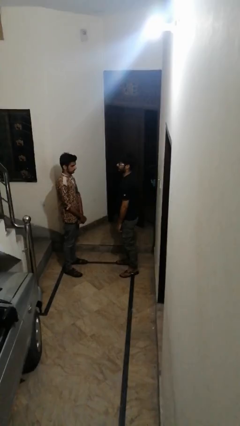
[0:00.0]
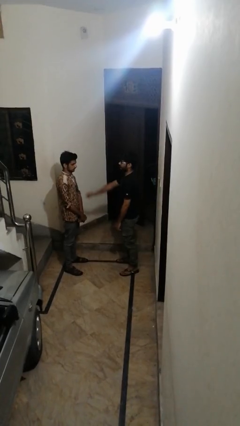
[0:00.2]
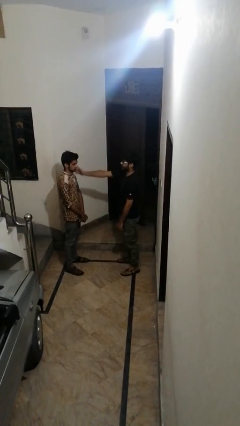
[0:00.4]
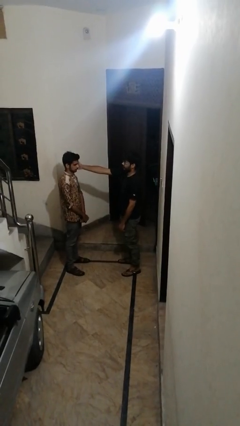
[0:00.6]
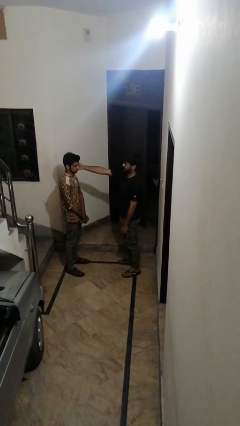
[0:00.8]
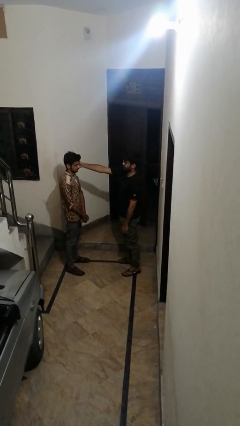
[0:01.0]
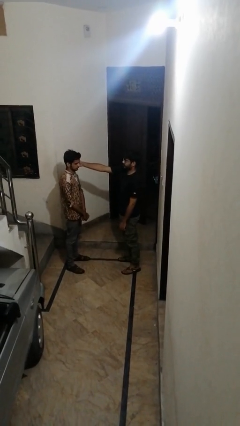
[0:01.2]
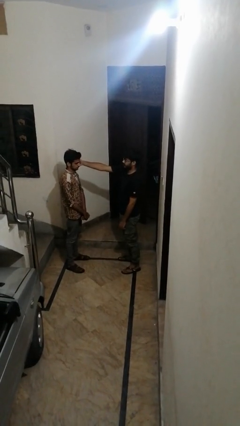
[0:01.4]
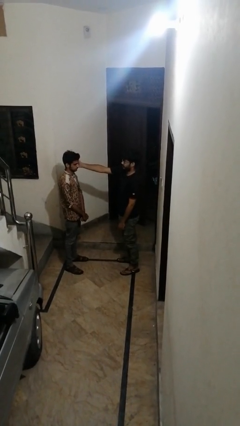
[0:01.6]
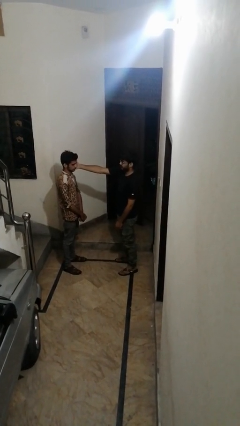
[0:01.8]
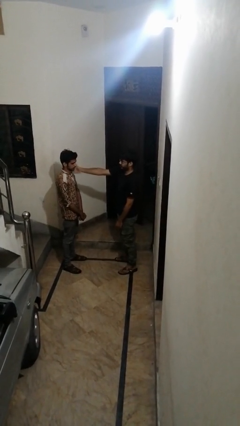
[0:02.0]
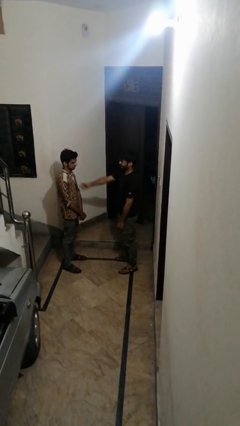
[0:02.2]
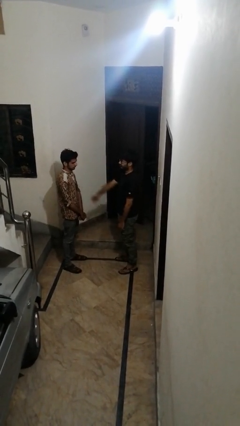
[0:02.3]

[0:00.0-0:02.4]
person touches face of person

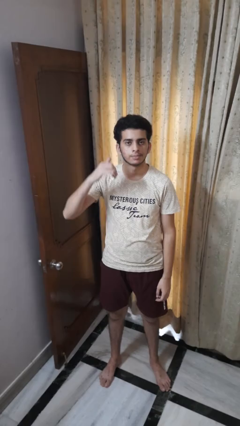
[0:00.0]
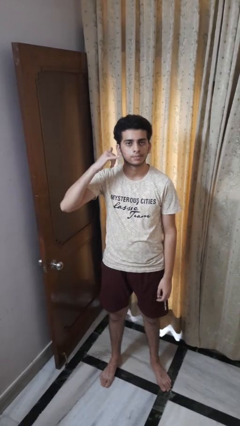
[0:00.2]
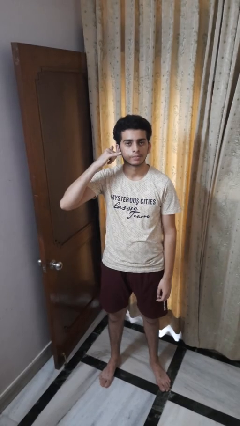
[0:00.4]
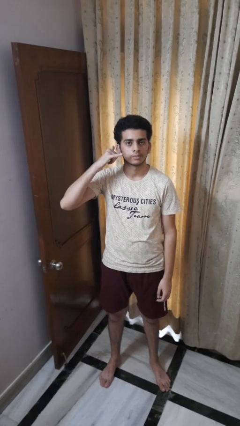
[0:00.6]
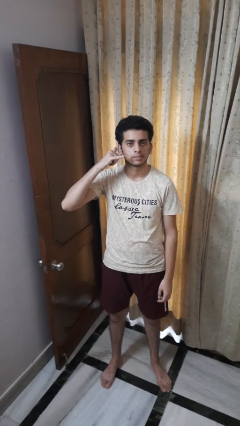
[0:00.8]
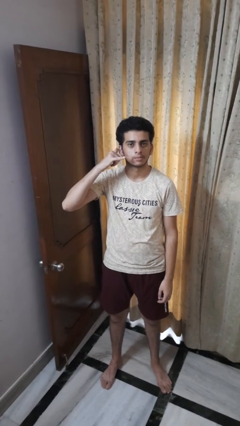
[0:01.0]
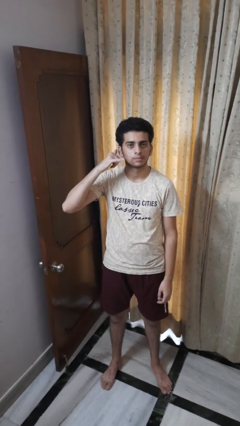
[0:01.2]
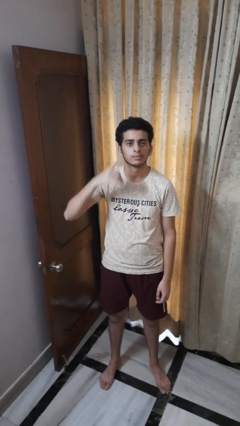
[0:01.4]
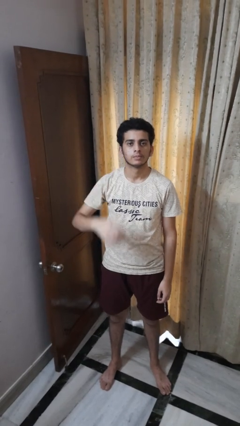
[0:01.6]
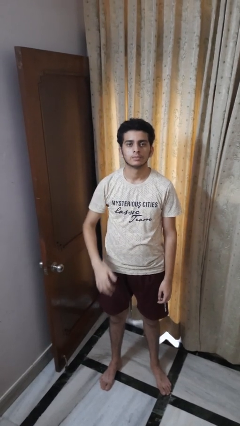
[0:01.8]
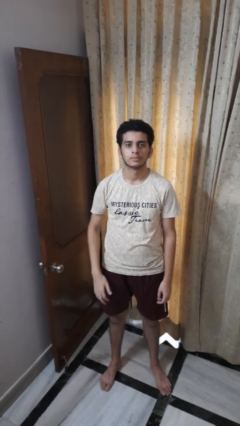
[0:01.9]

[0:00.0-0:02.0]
person gestures call me

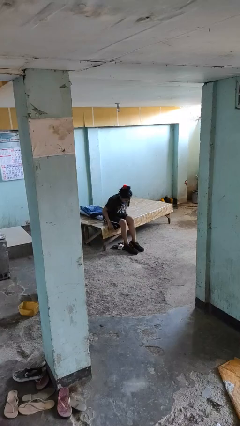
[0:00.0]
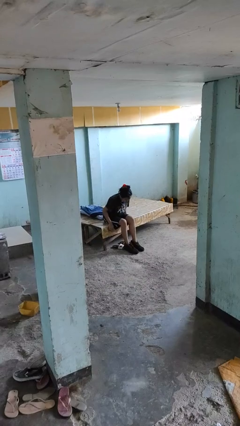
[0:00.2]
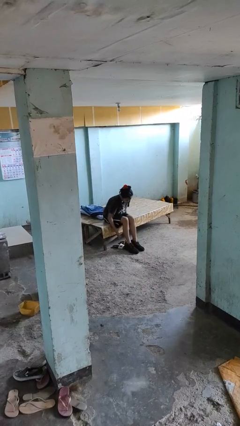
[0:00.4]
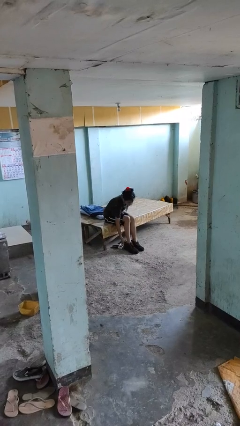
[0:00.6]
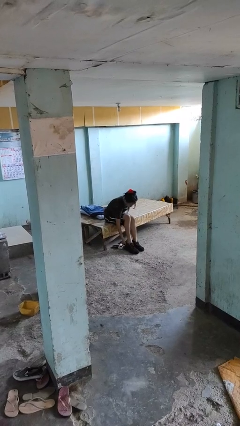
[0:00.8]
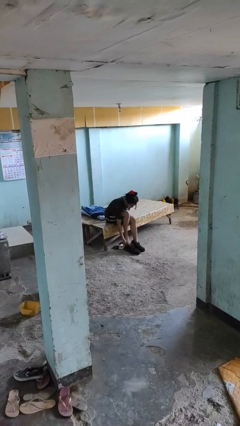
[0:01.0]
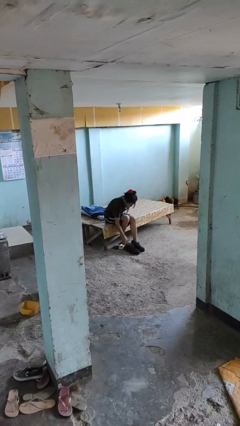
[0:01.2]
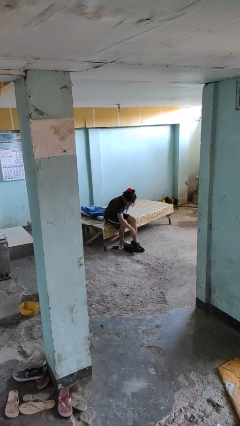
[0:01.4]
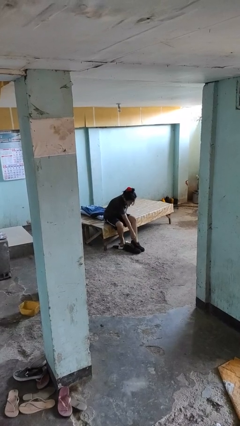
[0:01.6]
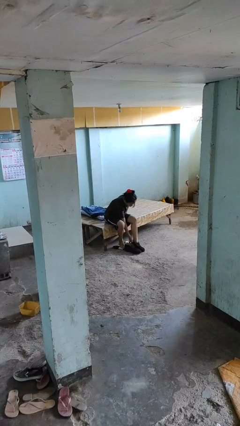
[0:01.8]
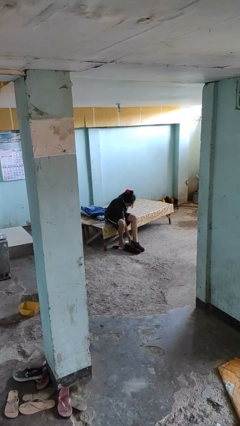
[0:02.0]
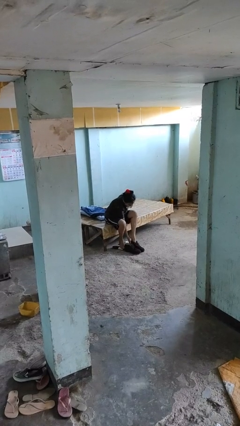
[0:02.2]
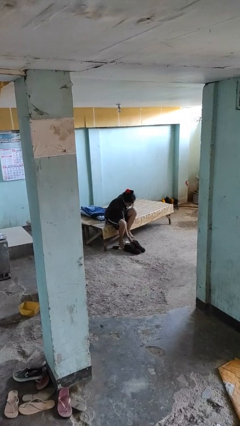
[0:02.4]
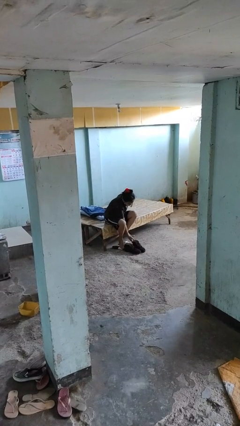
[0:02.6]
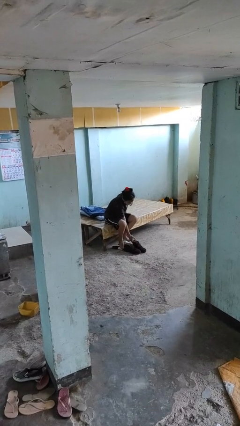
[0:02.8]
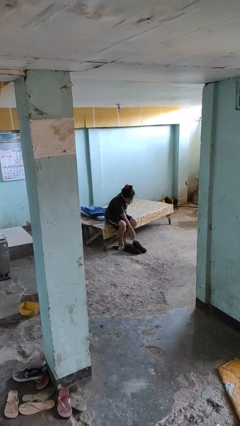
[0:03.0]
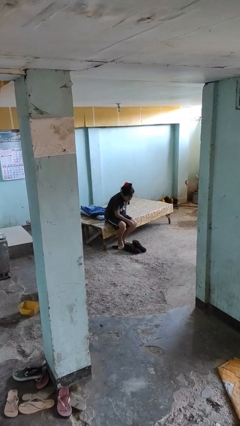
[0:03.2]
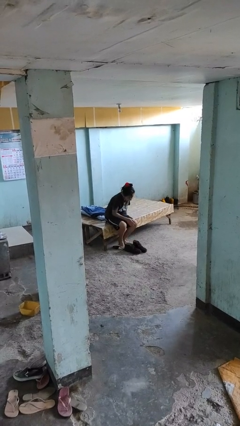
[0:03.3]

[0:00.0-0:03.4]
person takes off boots

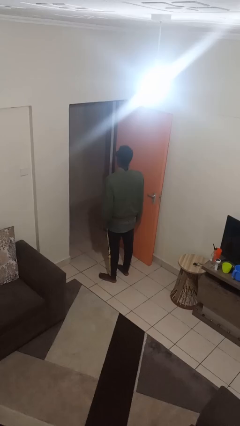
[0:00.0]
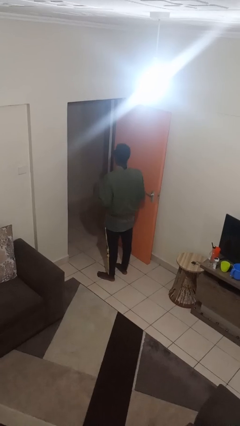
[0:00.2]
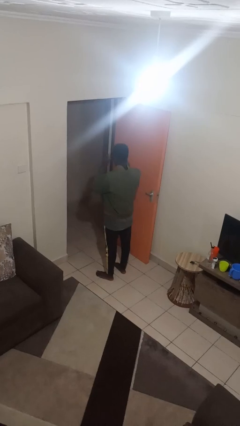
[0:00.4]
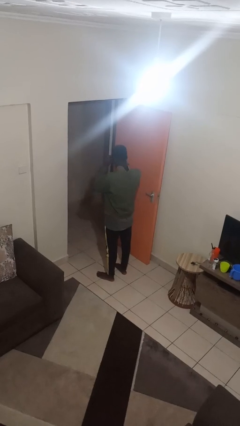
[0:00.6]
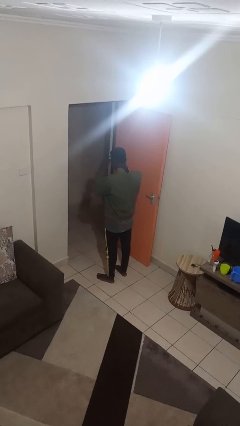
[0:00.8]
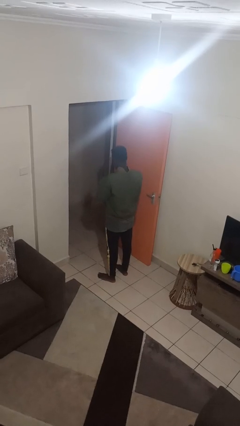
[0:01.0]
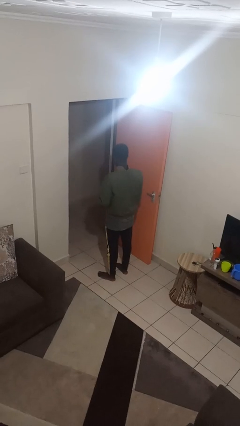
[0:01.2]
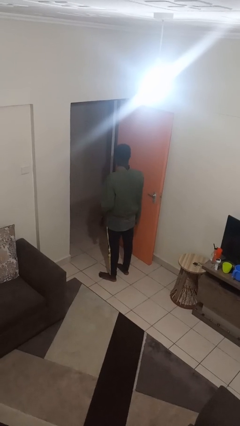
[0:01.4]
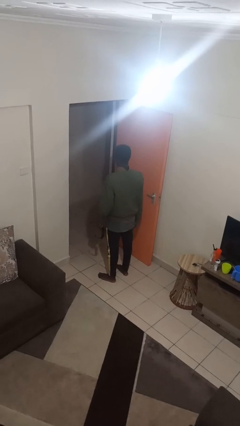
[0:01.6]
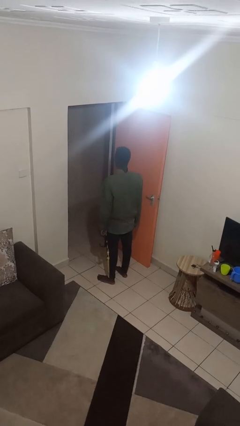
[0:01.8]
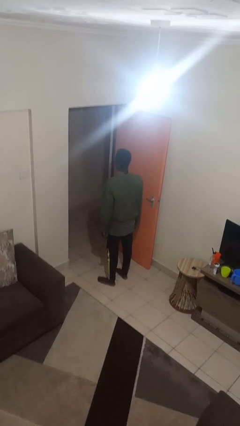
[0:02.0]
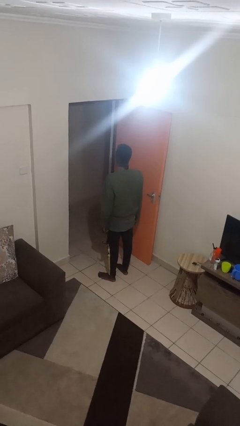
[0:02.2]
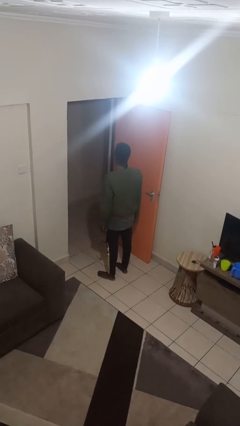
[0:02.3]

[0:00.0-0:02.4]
person takes off sunglasses

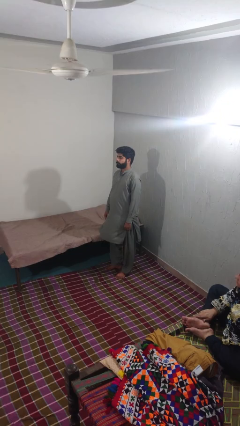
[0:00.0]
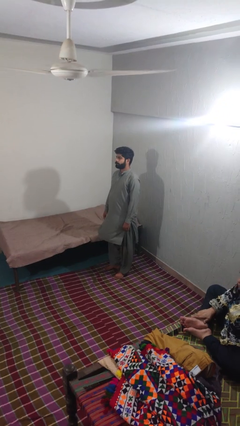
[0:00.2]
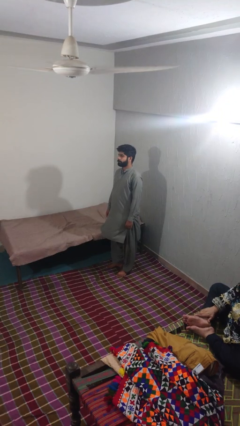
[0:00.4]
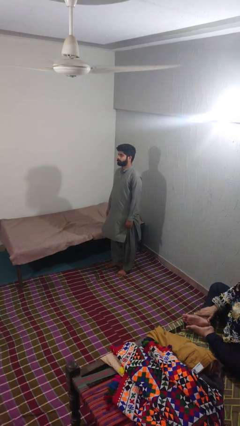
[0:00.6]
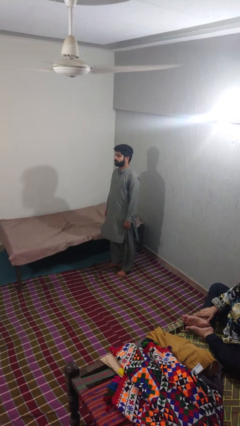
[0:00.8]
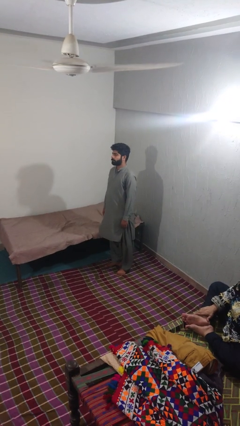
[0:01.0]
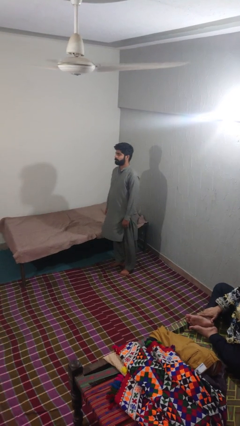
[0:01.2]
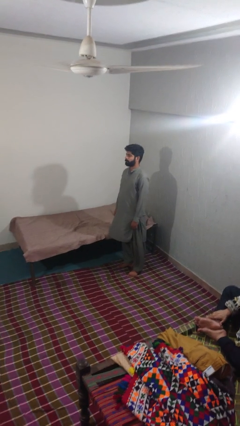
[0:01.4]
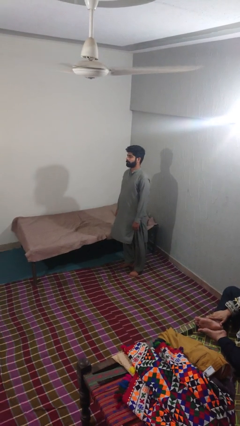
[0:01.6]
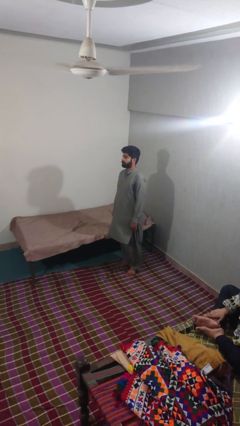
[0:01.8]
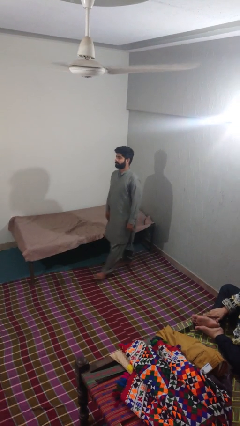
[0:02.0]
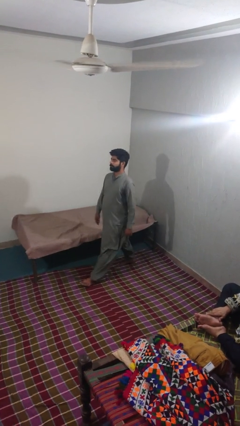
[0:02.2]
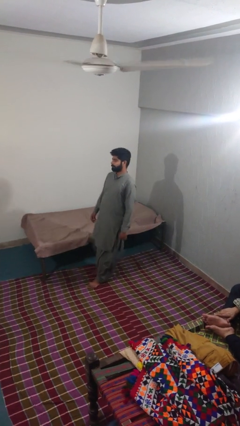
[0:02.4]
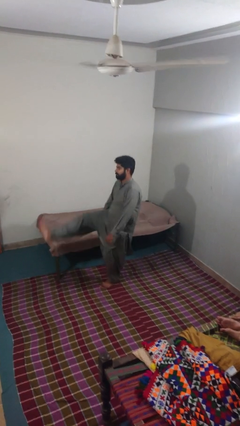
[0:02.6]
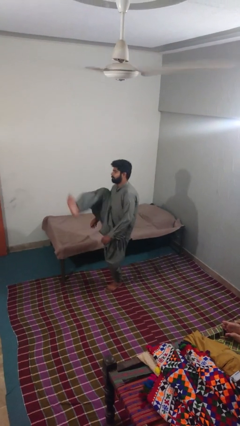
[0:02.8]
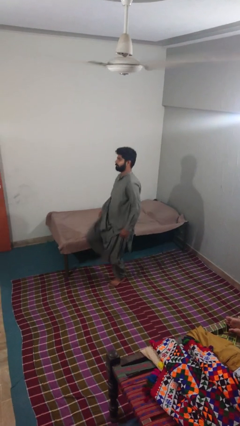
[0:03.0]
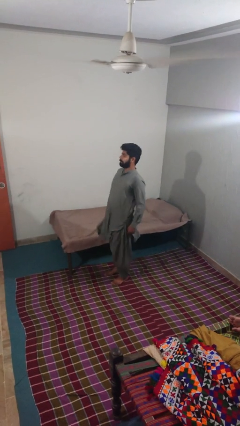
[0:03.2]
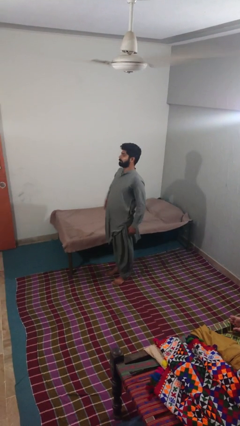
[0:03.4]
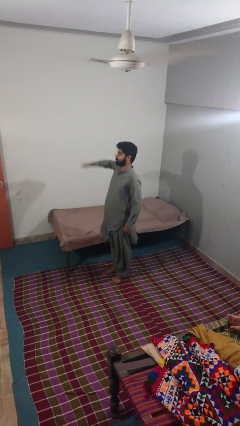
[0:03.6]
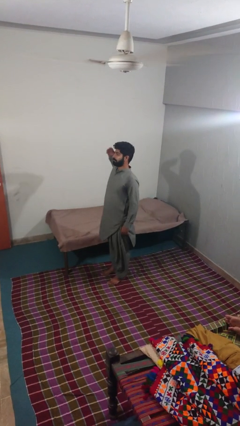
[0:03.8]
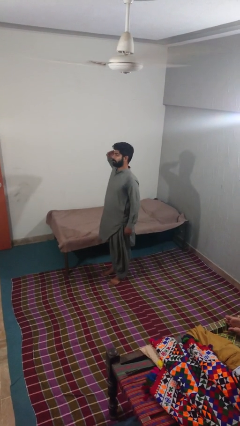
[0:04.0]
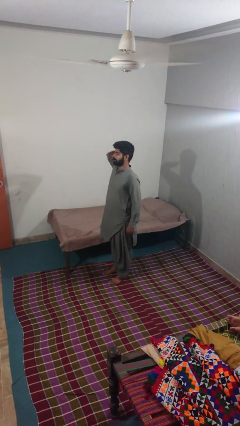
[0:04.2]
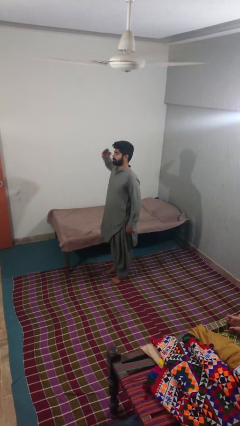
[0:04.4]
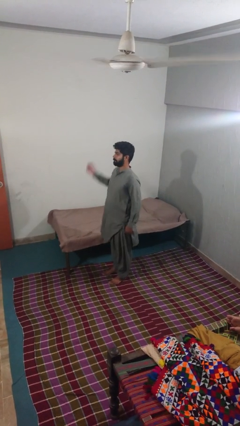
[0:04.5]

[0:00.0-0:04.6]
person salutes

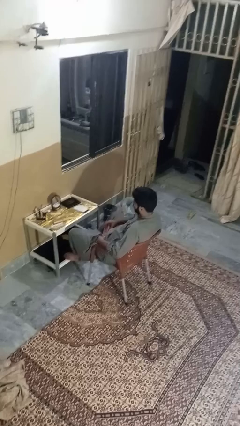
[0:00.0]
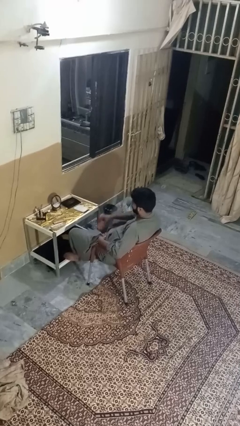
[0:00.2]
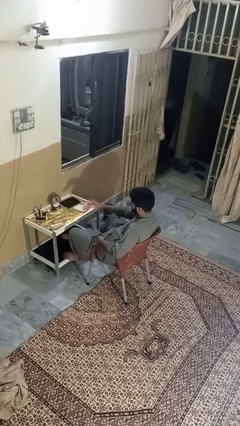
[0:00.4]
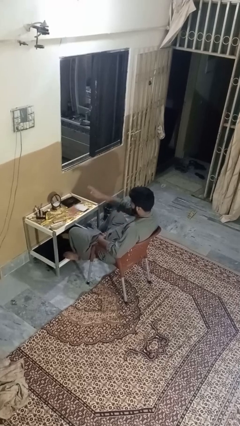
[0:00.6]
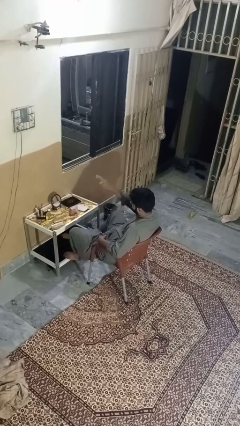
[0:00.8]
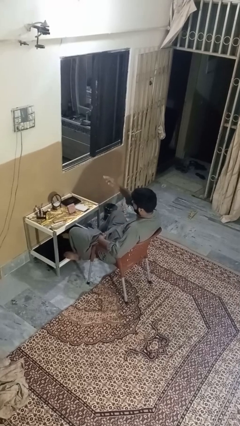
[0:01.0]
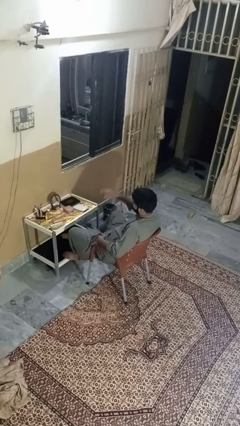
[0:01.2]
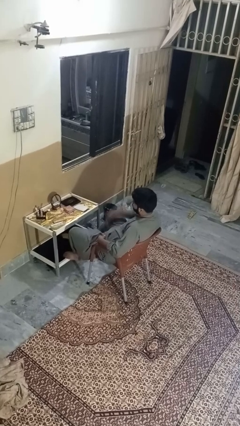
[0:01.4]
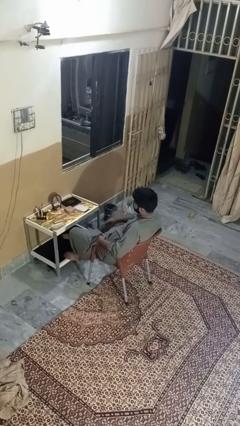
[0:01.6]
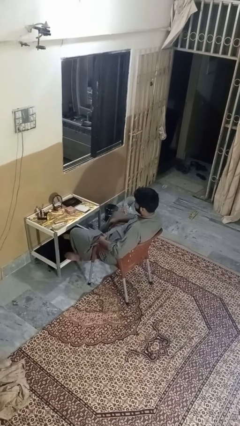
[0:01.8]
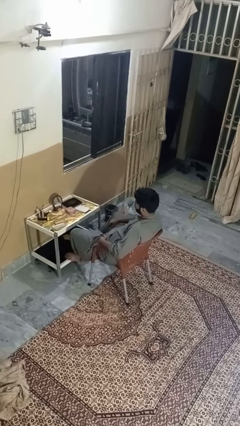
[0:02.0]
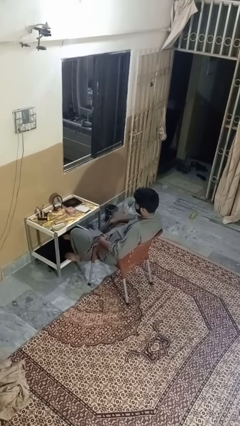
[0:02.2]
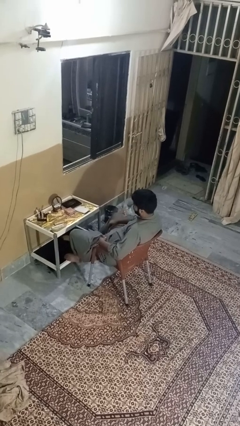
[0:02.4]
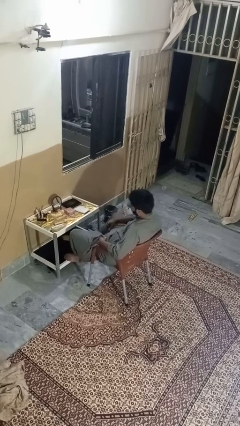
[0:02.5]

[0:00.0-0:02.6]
person throws object on table
